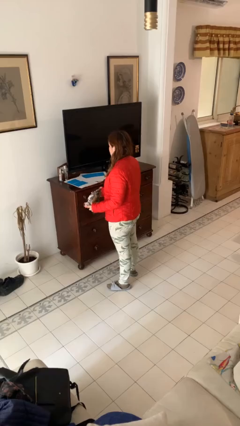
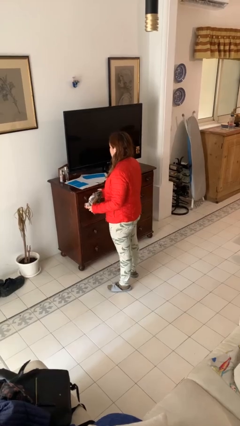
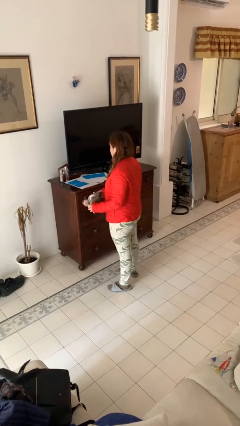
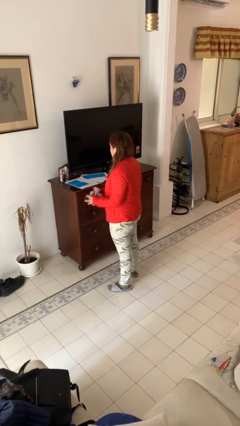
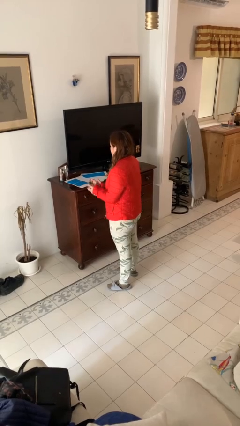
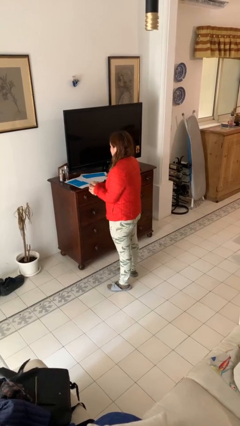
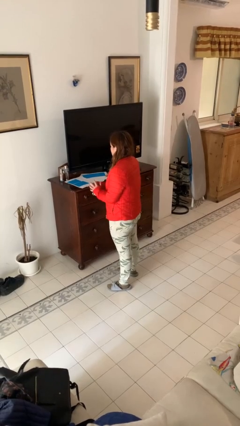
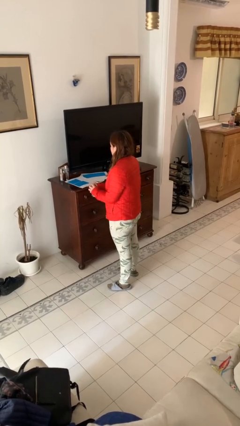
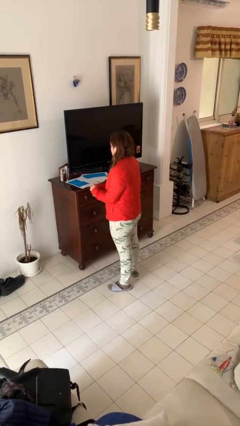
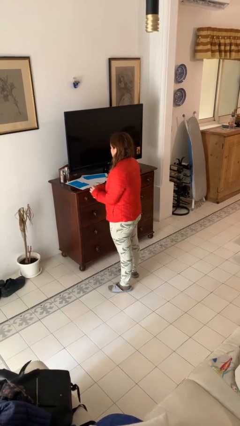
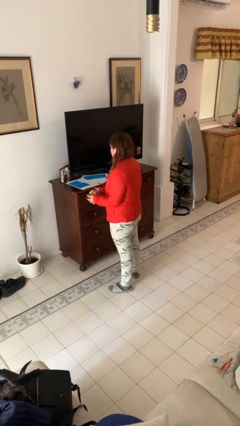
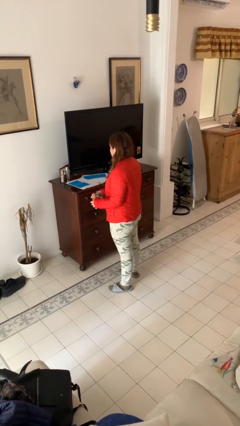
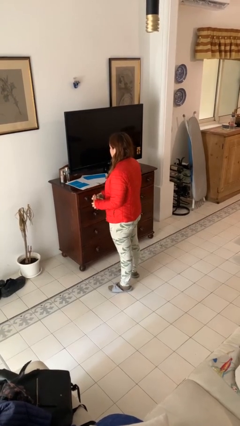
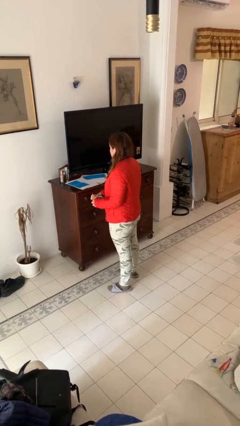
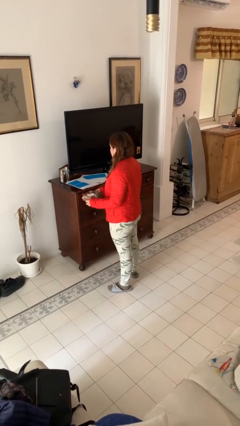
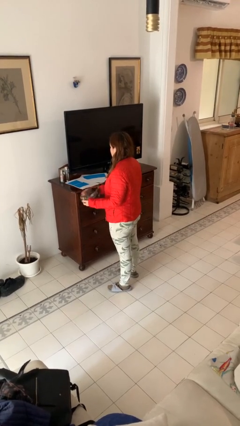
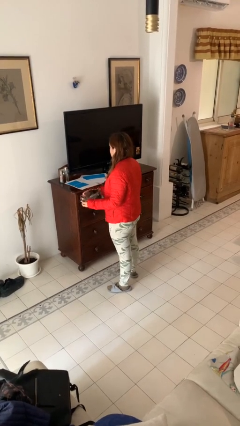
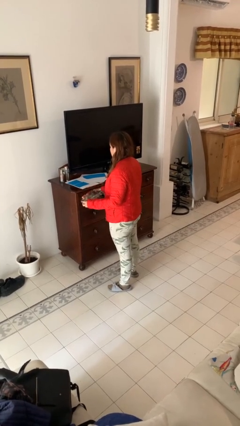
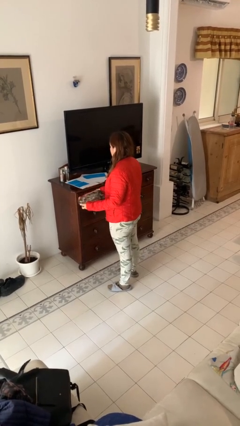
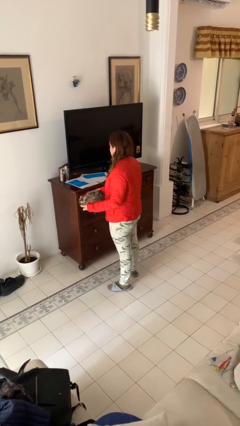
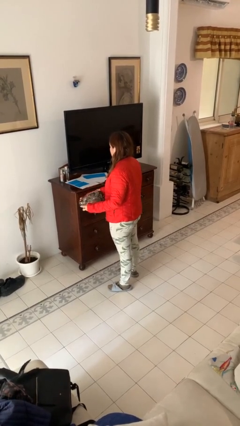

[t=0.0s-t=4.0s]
person crumples paper

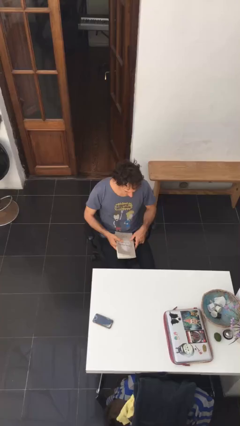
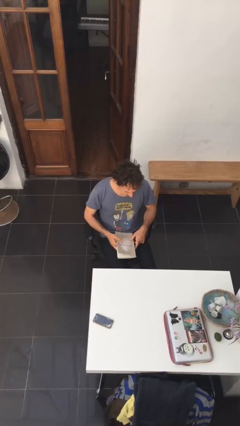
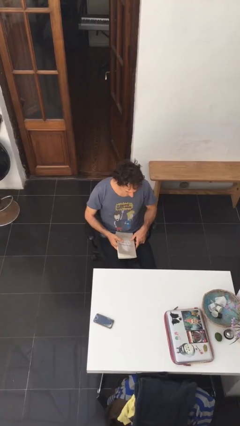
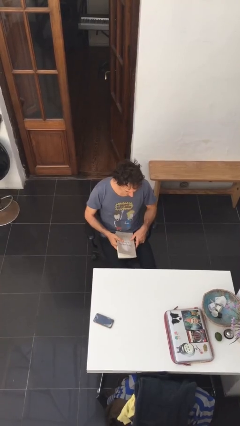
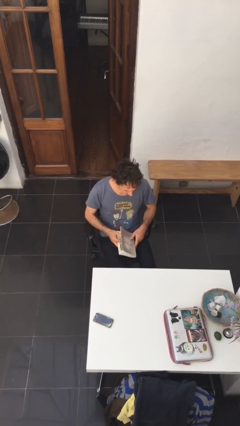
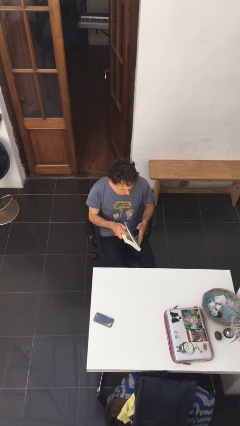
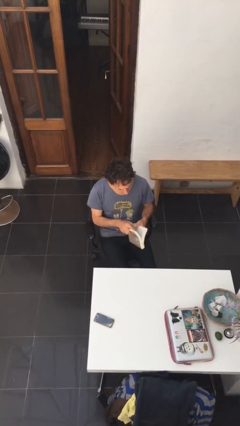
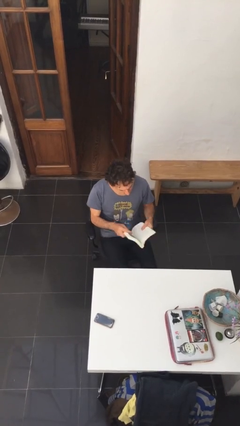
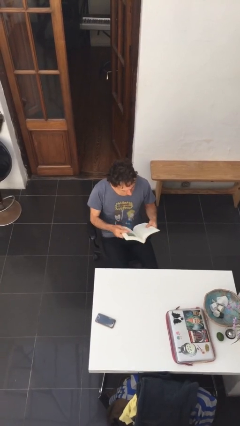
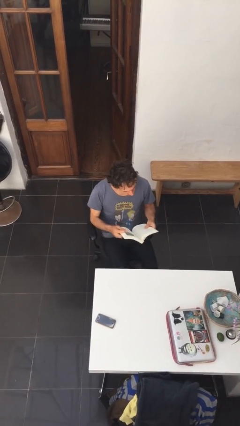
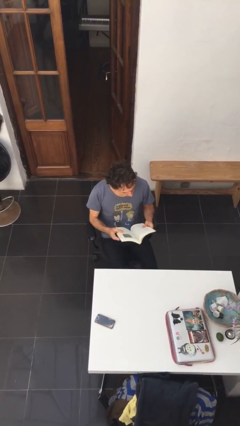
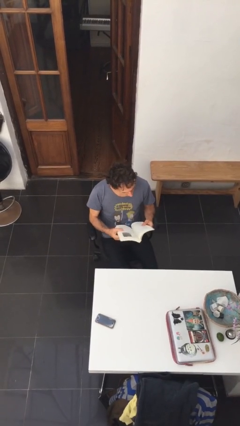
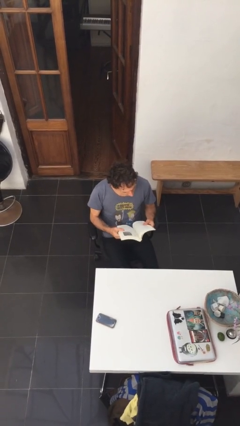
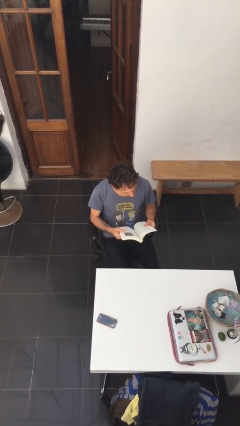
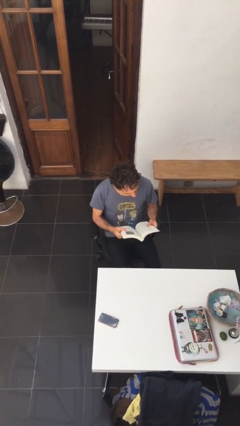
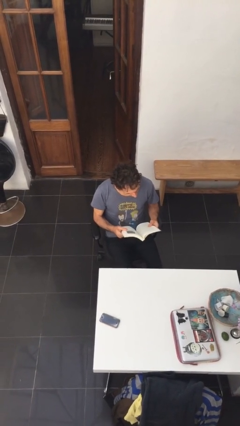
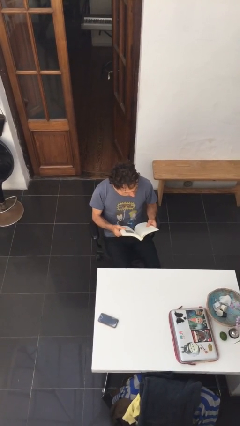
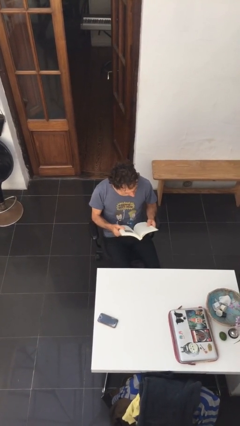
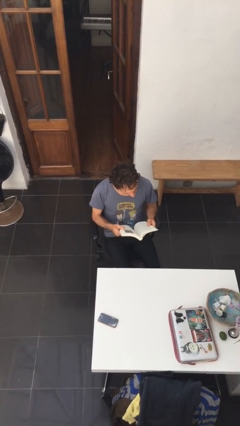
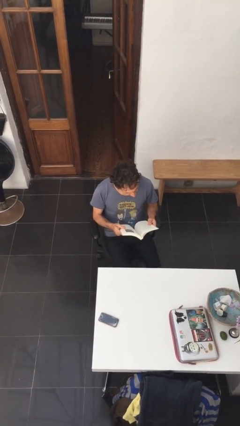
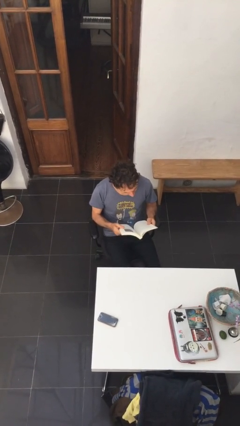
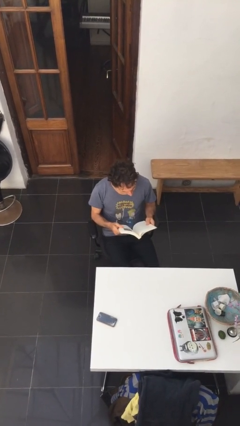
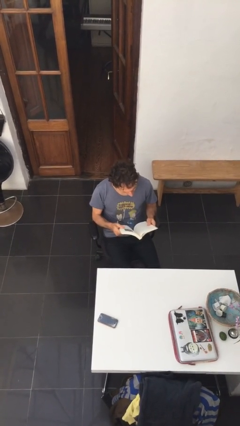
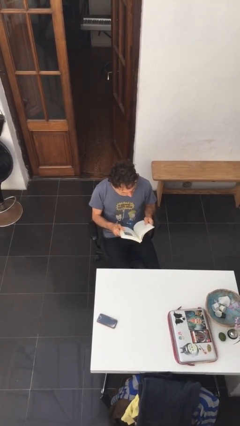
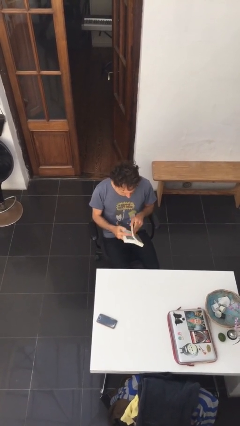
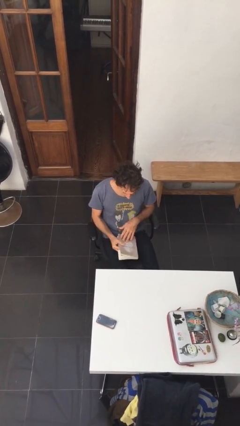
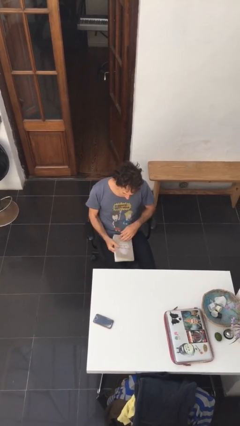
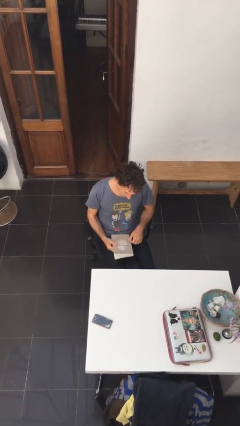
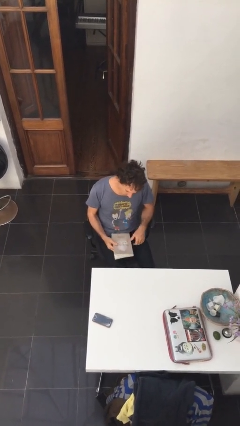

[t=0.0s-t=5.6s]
person reads document

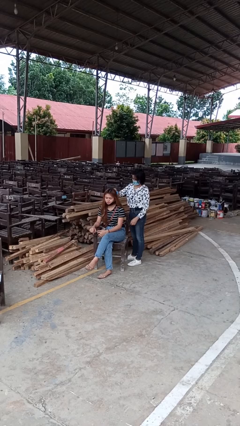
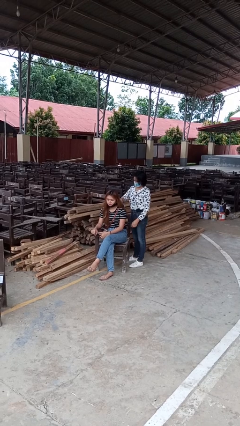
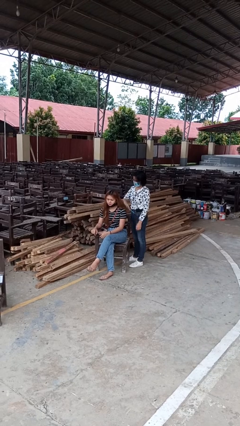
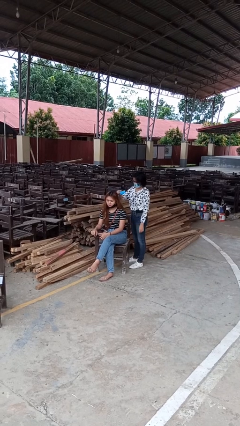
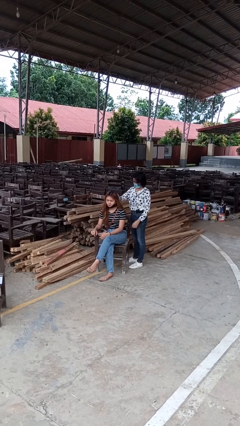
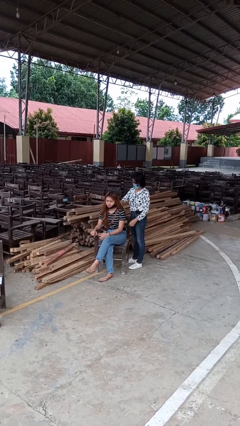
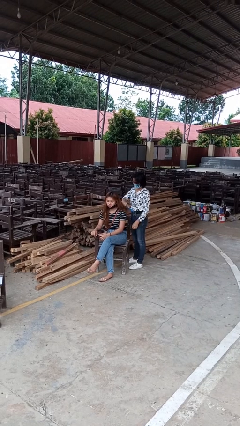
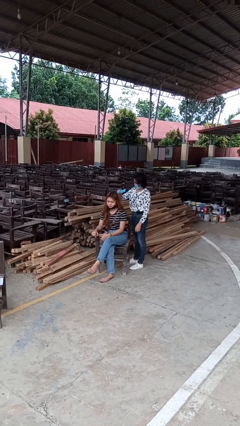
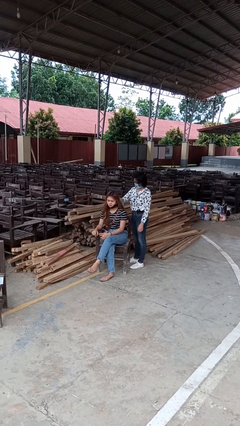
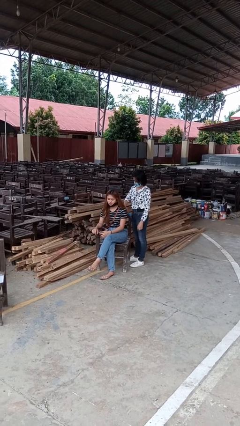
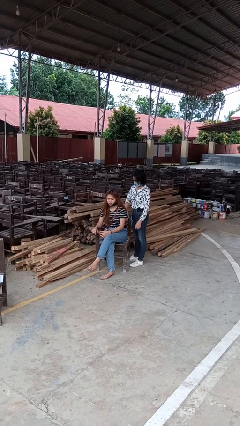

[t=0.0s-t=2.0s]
person brushes hair of person

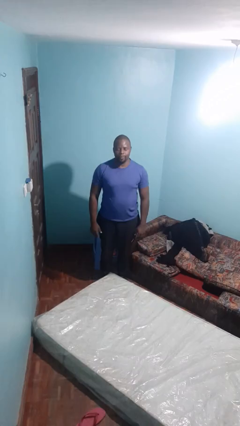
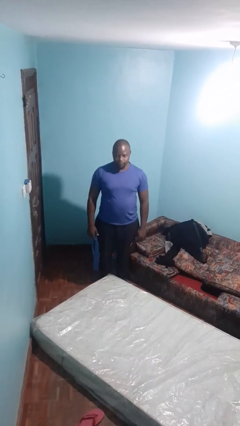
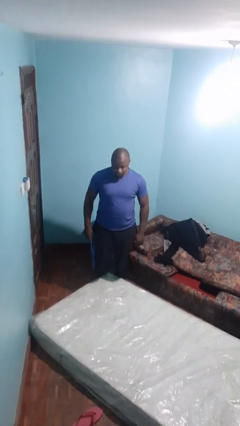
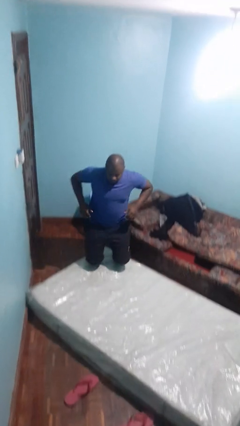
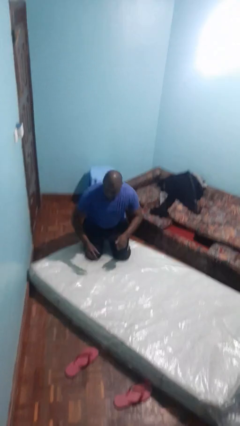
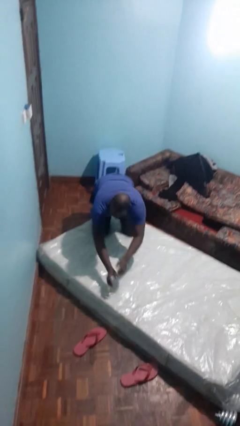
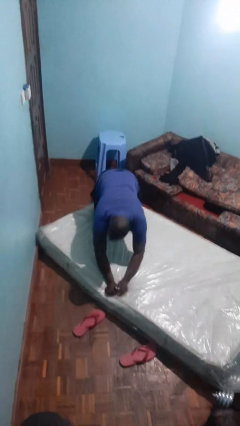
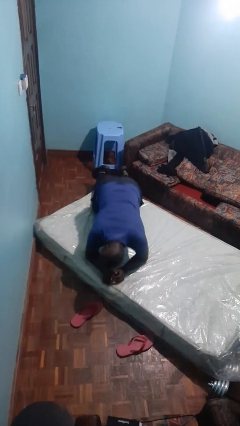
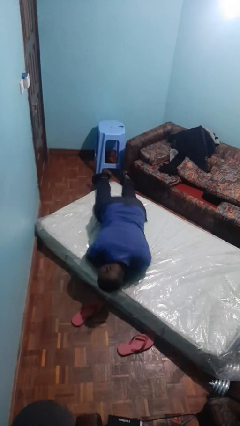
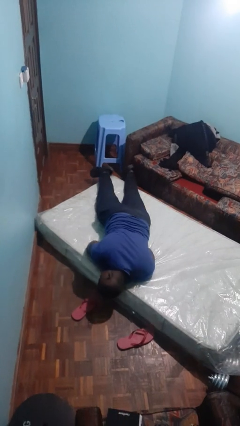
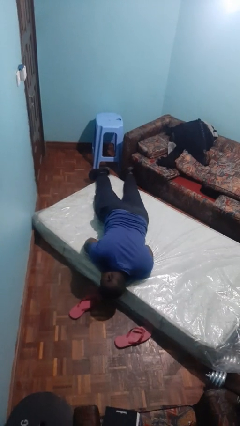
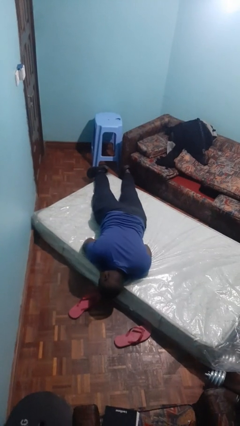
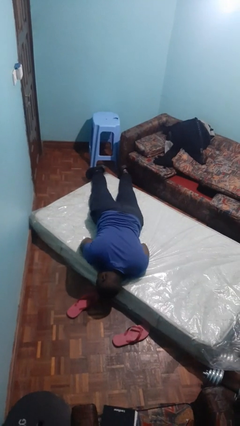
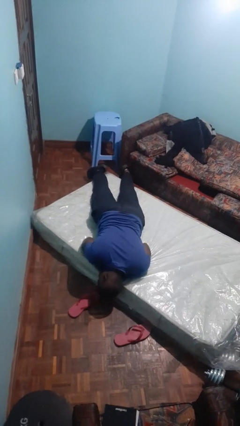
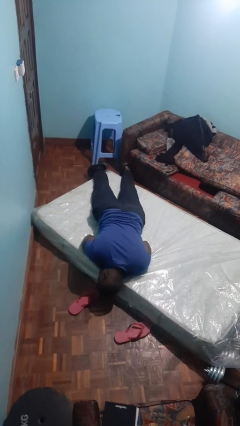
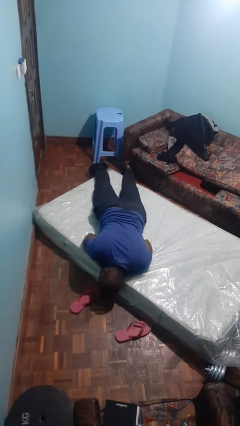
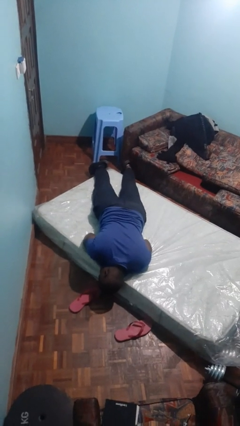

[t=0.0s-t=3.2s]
person lies down on bed

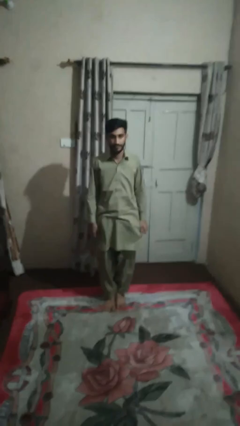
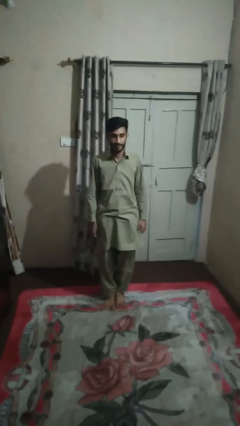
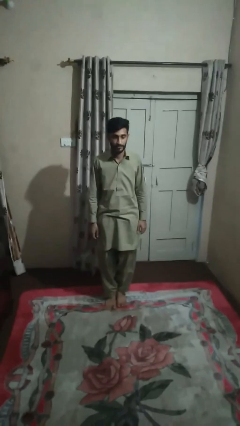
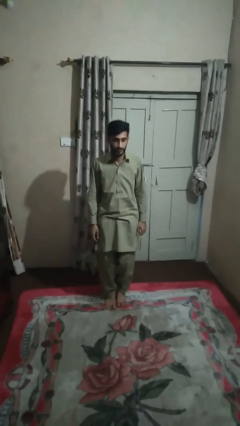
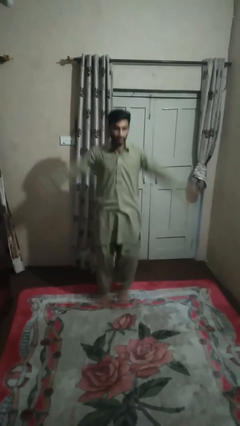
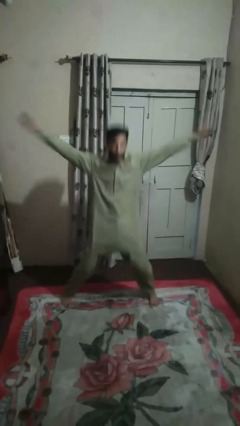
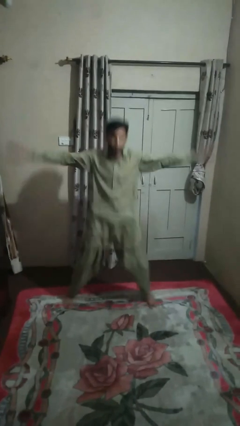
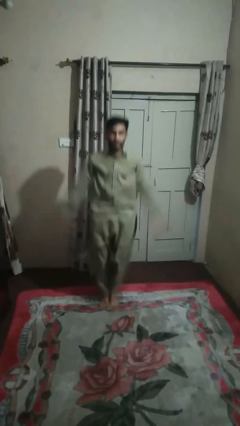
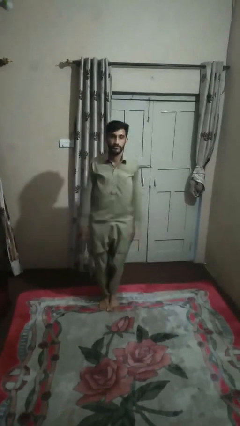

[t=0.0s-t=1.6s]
person exercises with jumping jacks

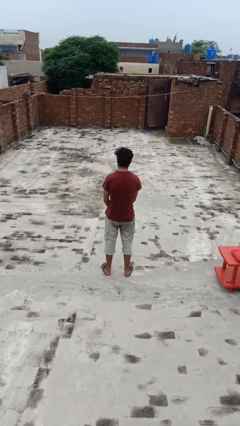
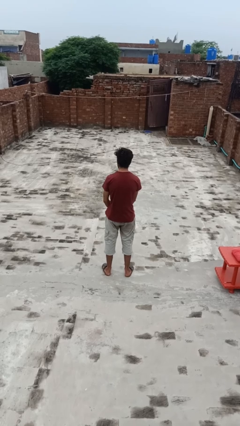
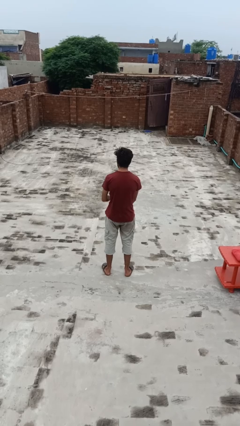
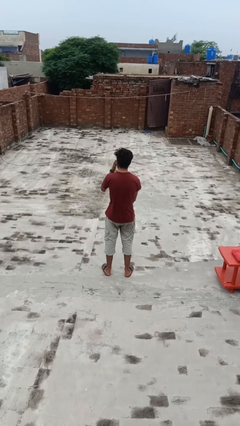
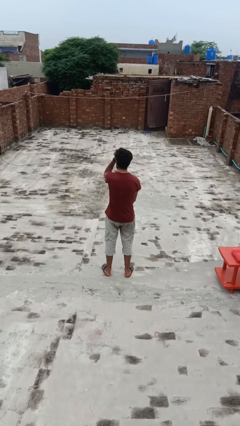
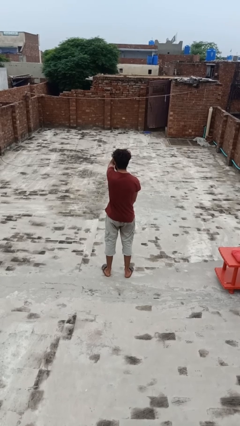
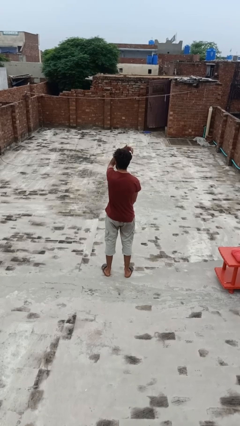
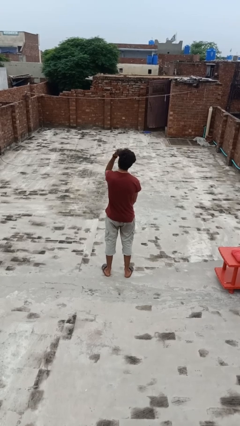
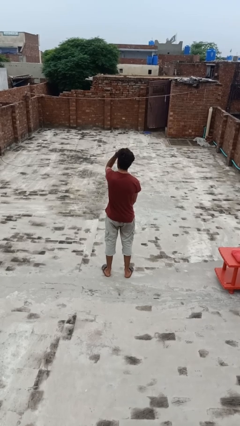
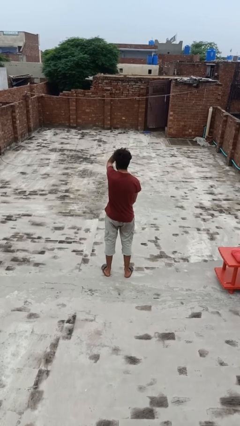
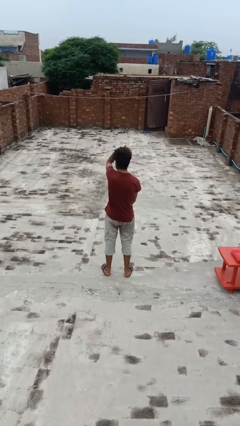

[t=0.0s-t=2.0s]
person strokes hair
